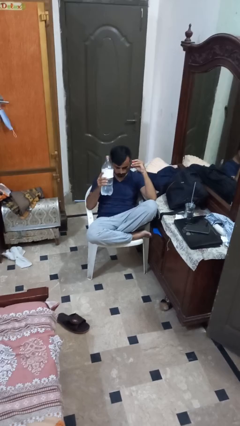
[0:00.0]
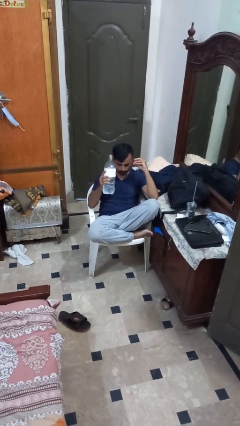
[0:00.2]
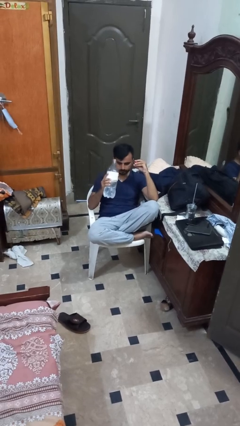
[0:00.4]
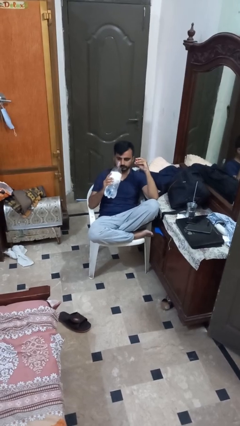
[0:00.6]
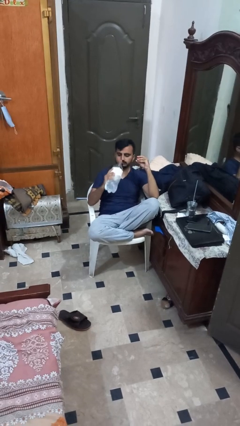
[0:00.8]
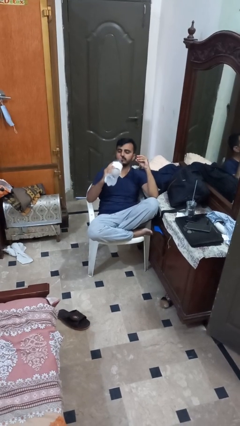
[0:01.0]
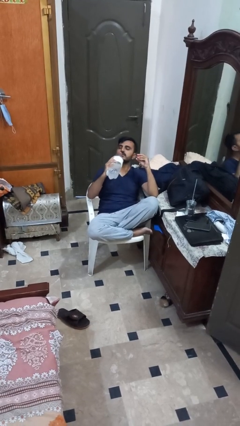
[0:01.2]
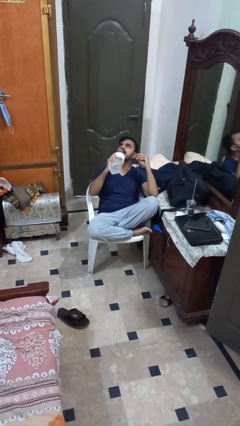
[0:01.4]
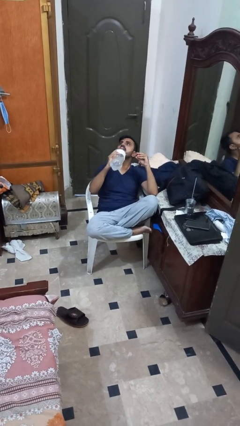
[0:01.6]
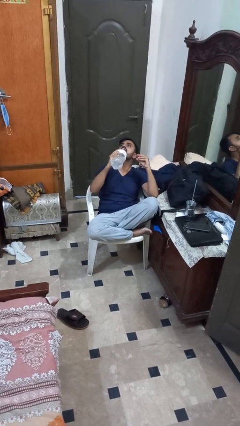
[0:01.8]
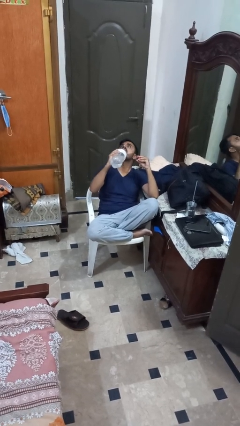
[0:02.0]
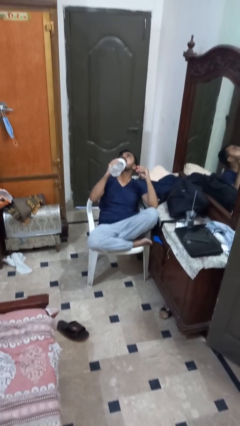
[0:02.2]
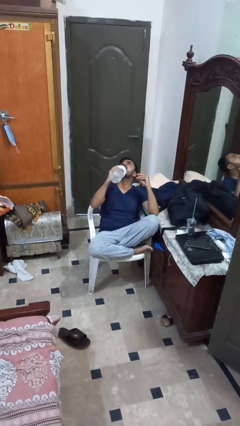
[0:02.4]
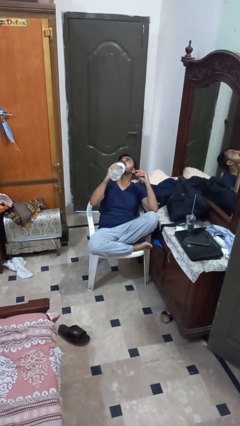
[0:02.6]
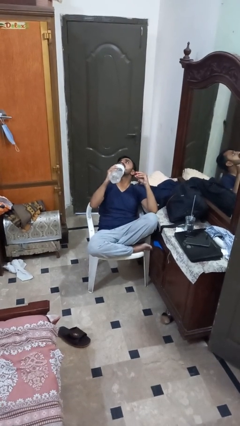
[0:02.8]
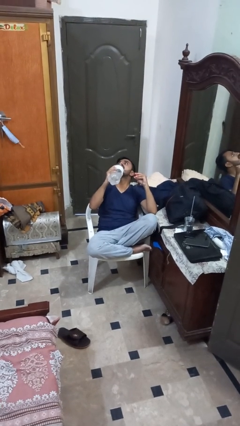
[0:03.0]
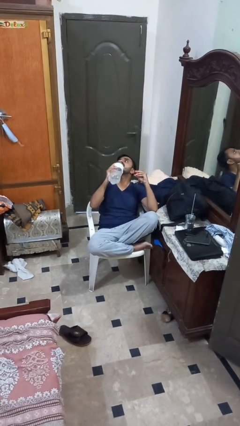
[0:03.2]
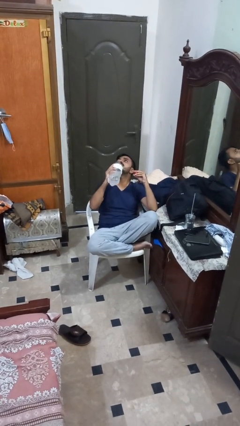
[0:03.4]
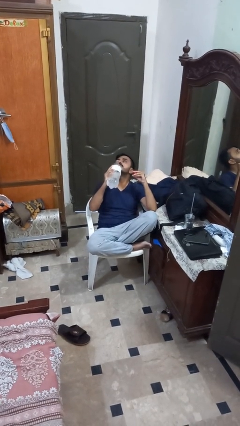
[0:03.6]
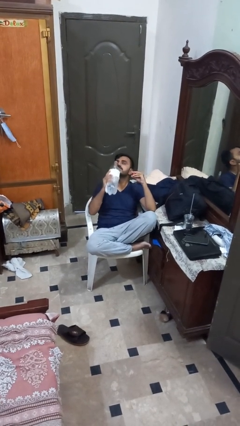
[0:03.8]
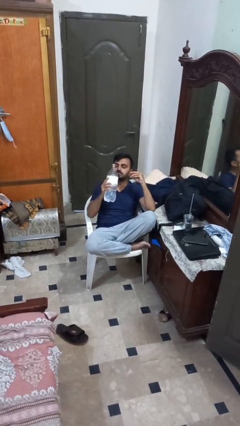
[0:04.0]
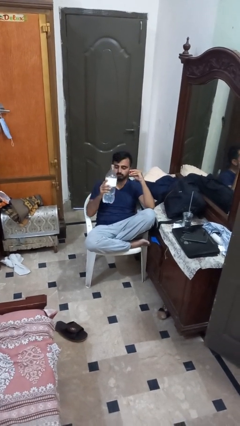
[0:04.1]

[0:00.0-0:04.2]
person drinks from bottle

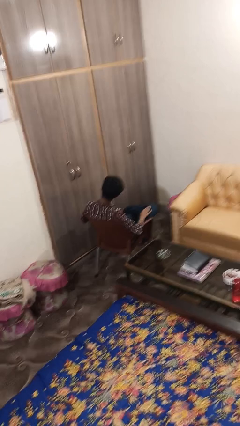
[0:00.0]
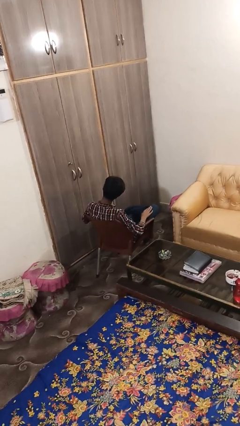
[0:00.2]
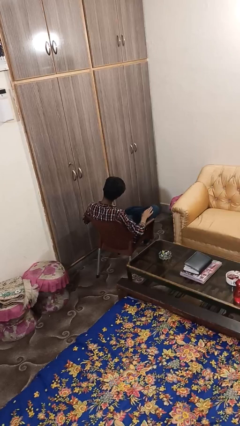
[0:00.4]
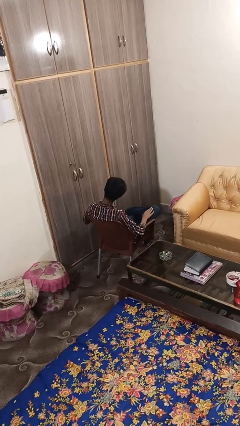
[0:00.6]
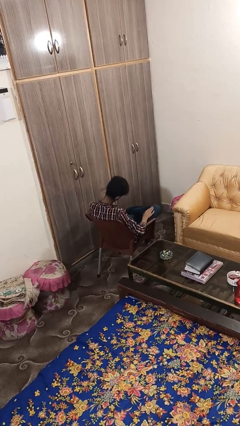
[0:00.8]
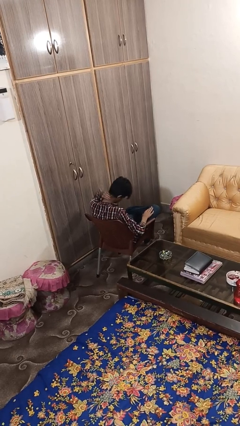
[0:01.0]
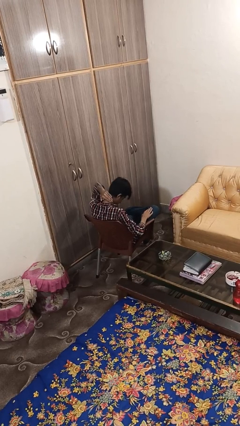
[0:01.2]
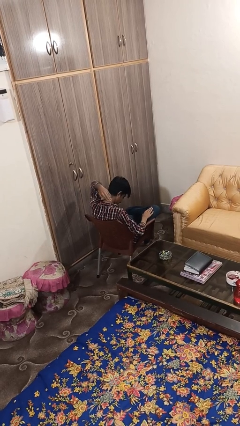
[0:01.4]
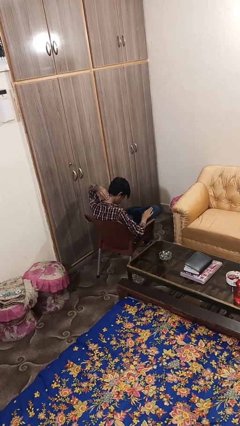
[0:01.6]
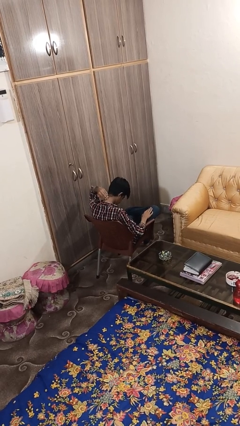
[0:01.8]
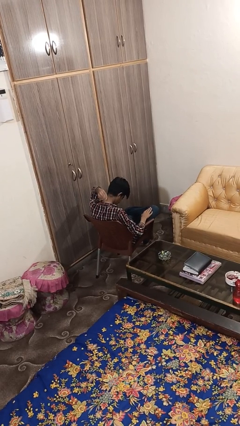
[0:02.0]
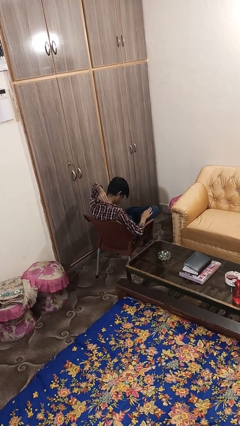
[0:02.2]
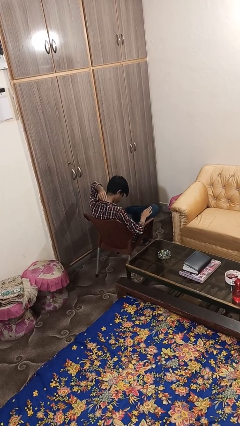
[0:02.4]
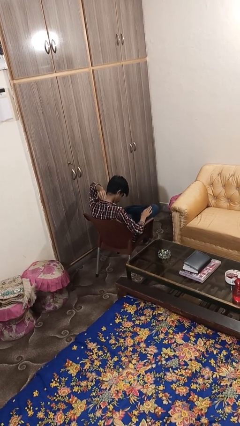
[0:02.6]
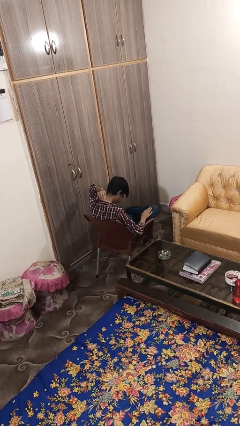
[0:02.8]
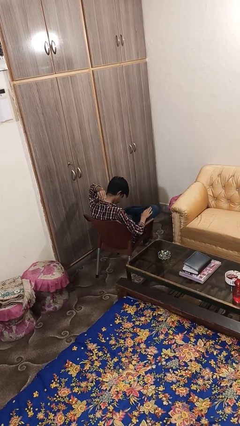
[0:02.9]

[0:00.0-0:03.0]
person swats bug

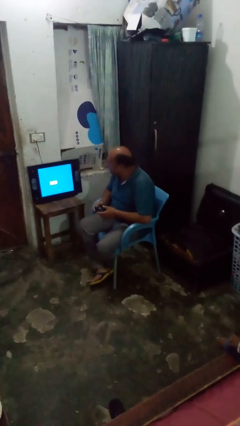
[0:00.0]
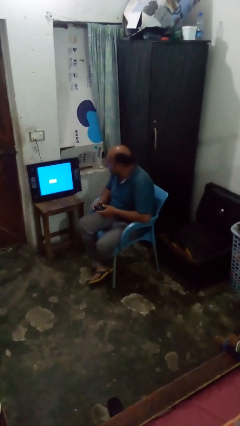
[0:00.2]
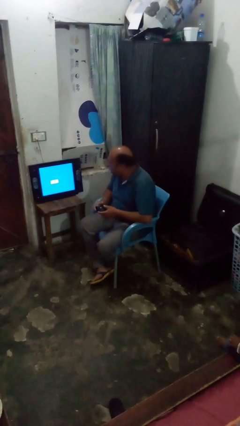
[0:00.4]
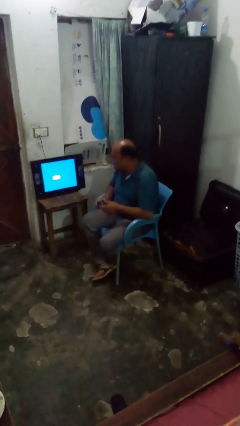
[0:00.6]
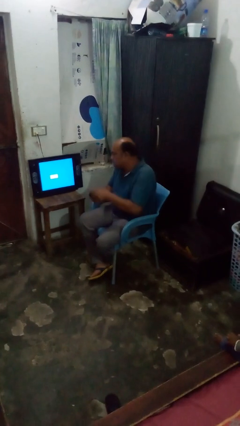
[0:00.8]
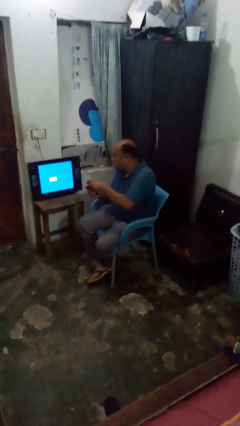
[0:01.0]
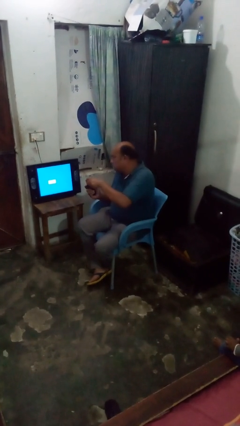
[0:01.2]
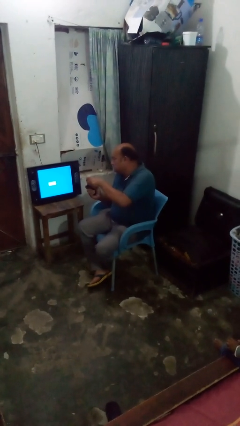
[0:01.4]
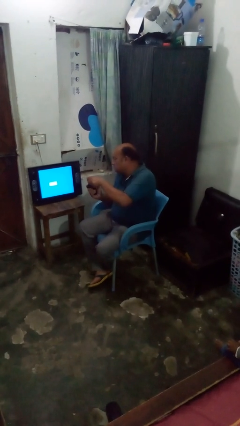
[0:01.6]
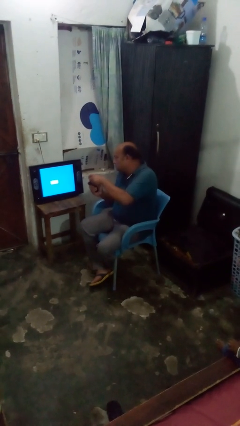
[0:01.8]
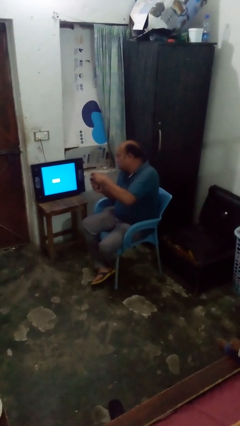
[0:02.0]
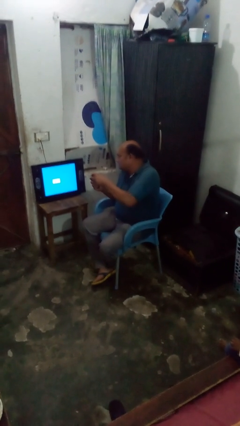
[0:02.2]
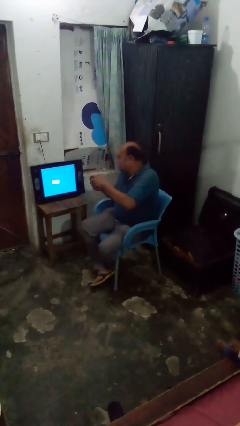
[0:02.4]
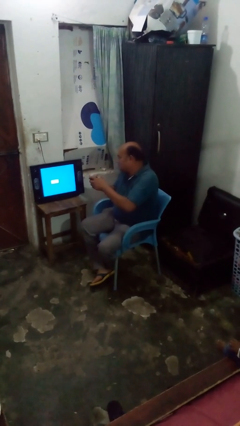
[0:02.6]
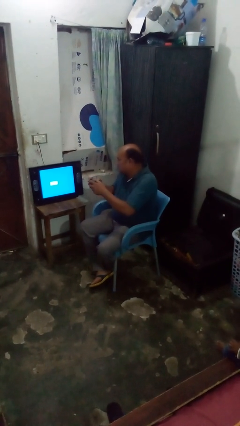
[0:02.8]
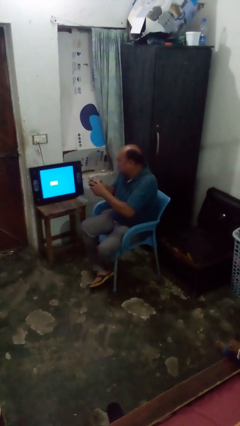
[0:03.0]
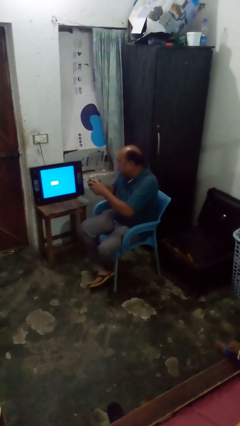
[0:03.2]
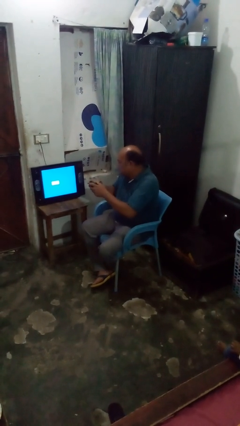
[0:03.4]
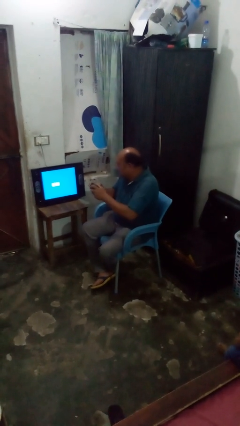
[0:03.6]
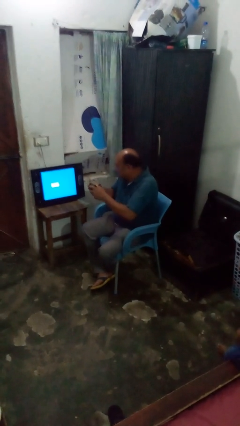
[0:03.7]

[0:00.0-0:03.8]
person interacts with handheld game

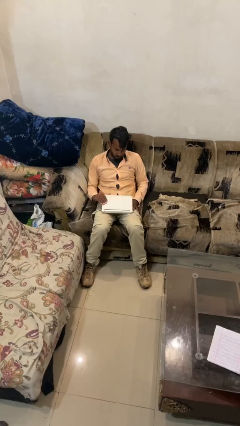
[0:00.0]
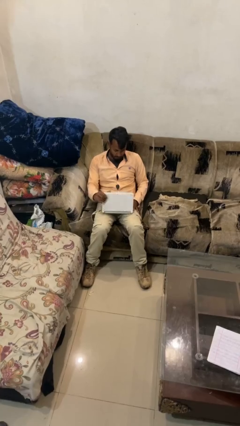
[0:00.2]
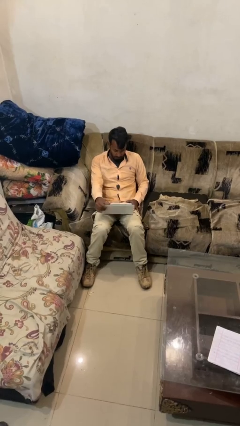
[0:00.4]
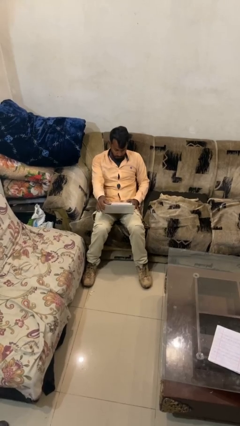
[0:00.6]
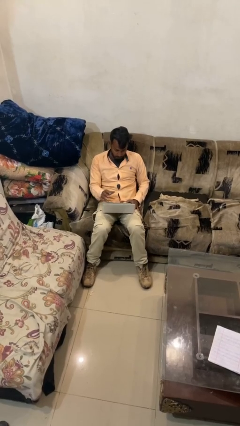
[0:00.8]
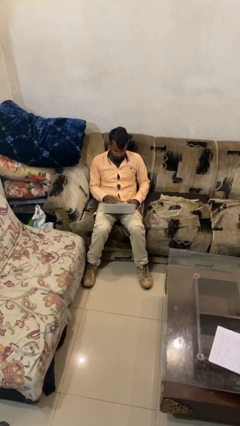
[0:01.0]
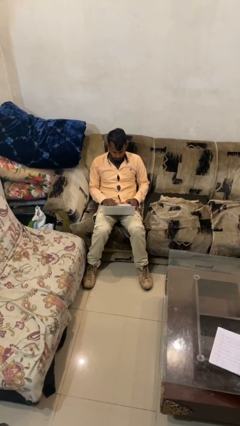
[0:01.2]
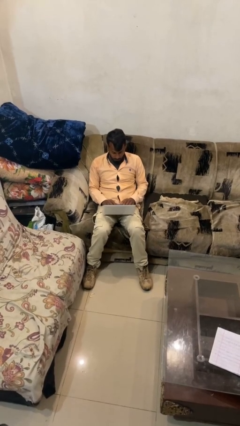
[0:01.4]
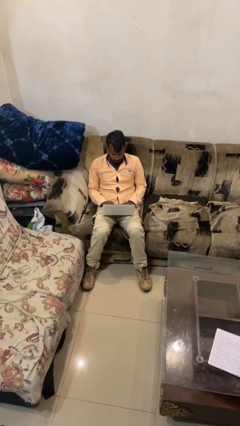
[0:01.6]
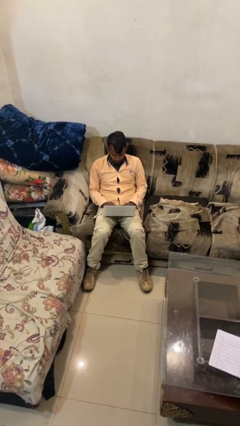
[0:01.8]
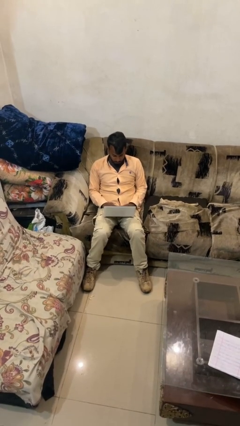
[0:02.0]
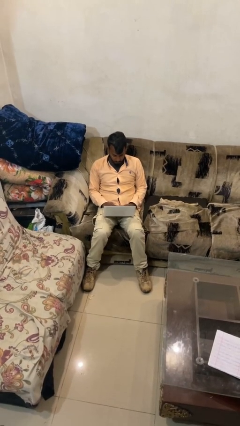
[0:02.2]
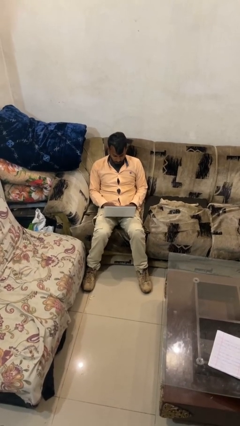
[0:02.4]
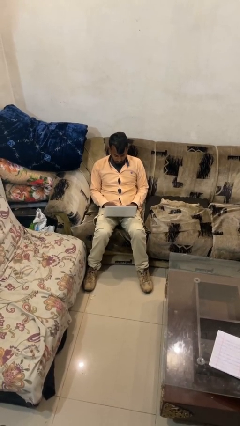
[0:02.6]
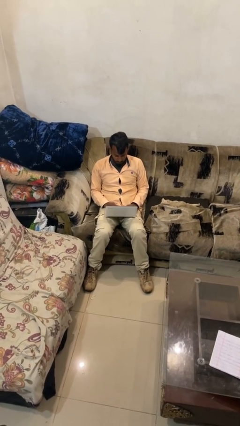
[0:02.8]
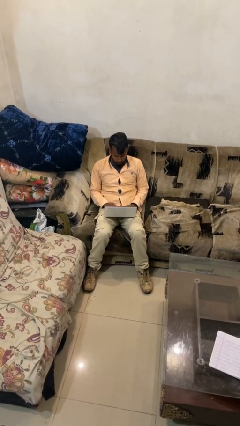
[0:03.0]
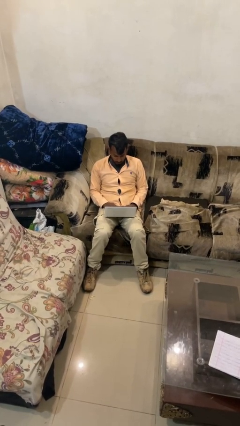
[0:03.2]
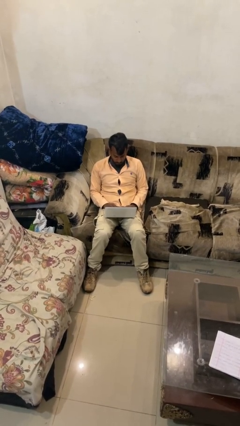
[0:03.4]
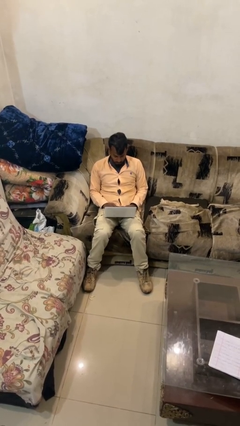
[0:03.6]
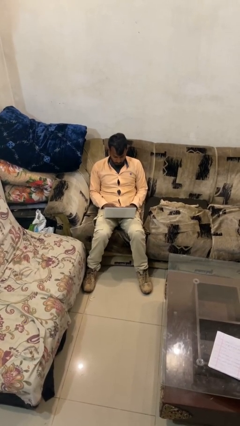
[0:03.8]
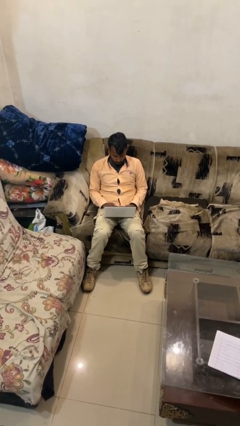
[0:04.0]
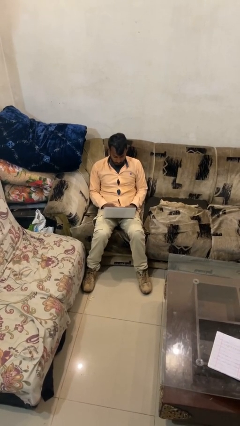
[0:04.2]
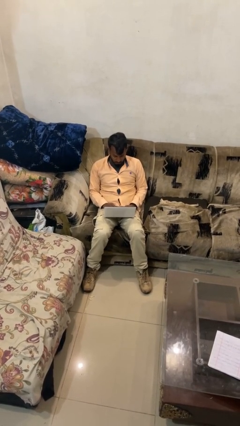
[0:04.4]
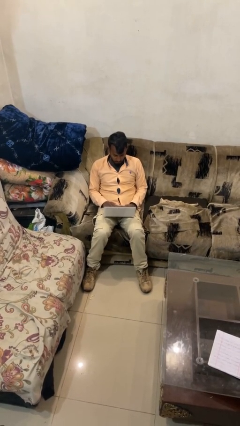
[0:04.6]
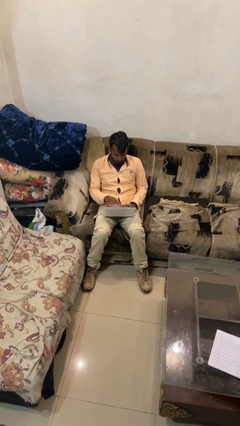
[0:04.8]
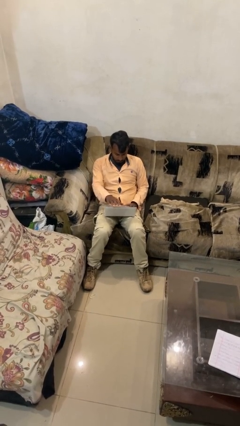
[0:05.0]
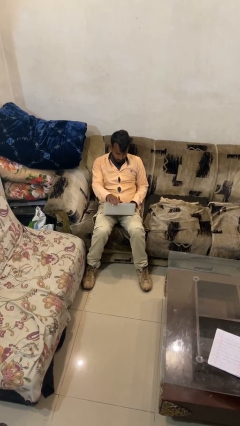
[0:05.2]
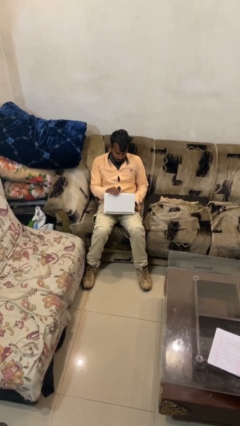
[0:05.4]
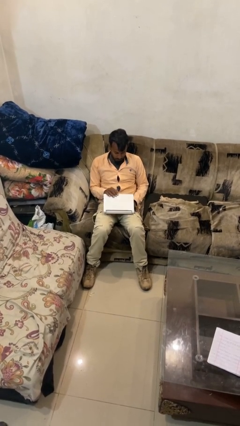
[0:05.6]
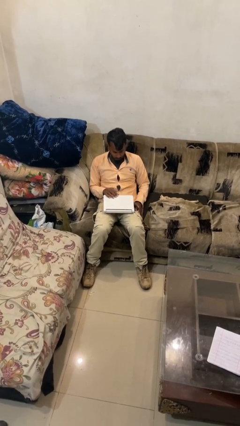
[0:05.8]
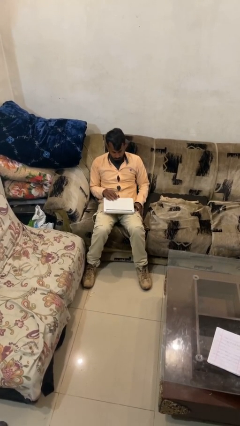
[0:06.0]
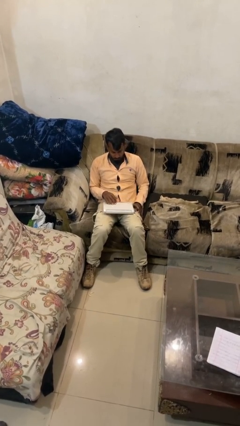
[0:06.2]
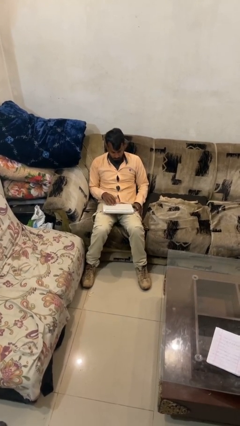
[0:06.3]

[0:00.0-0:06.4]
person interacts with laptop
